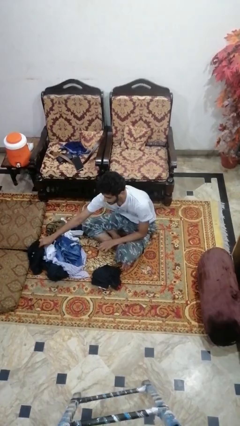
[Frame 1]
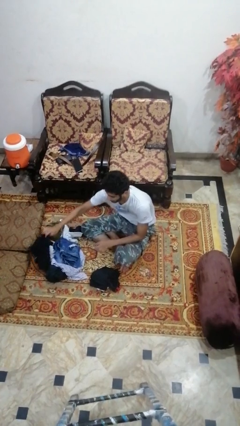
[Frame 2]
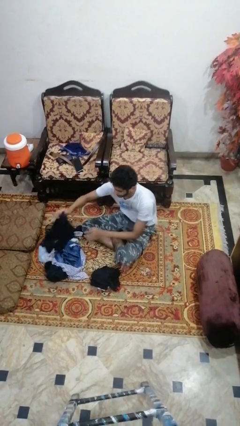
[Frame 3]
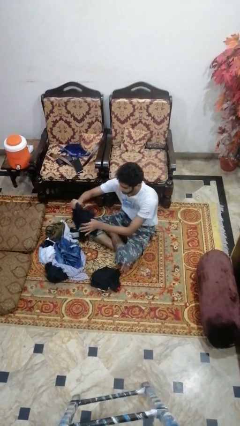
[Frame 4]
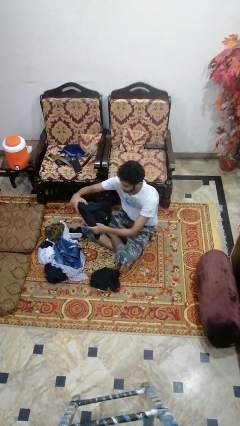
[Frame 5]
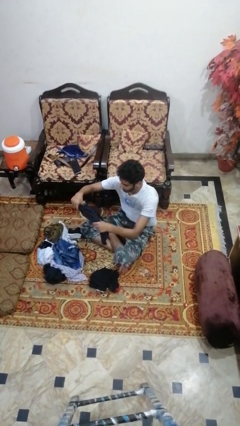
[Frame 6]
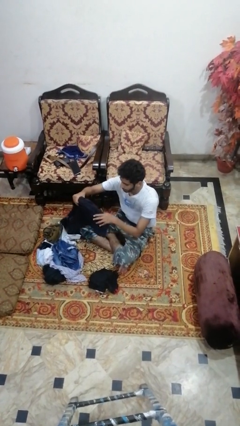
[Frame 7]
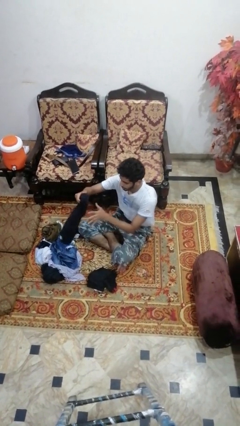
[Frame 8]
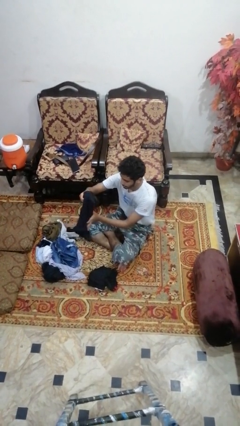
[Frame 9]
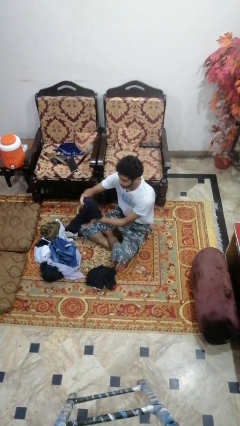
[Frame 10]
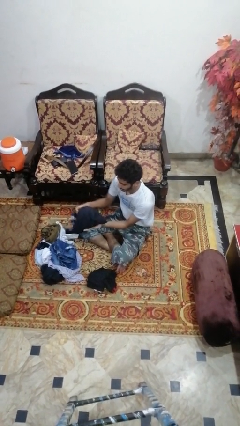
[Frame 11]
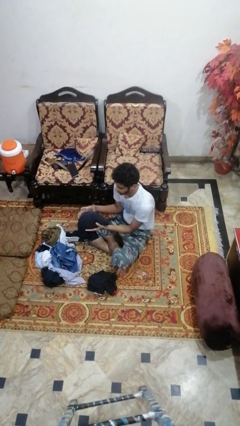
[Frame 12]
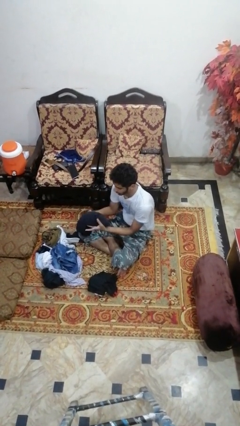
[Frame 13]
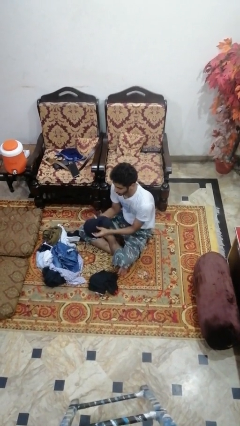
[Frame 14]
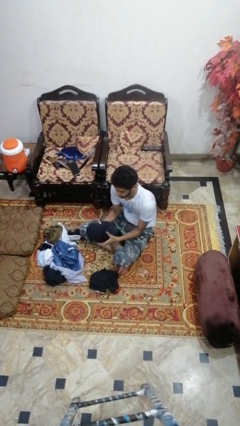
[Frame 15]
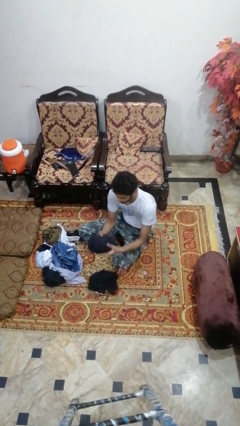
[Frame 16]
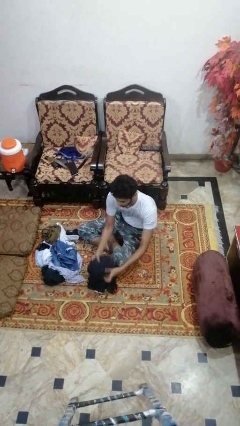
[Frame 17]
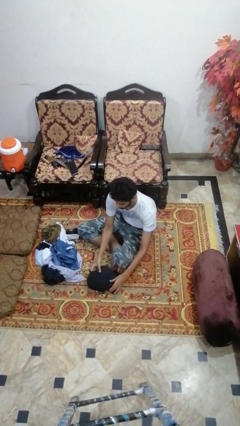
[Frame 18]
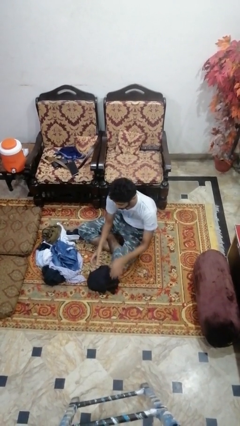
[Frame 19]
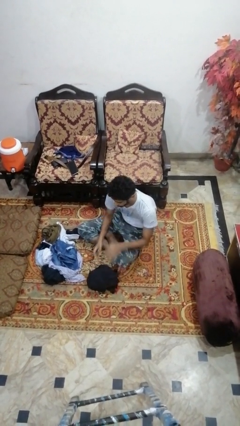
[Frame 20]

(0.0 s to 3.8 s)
person folds shirt

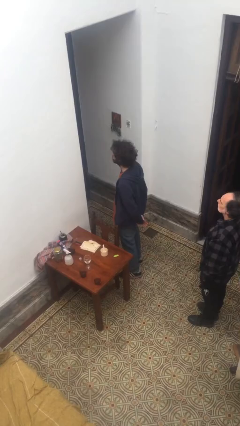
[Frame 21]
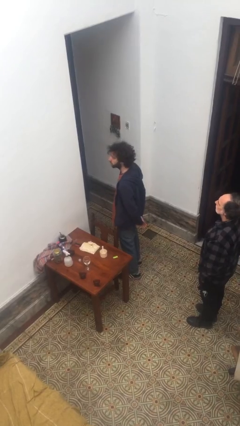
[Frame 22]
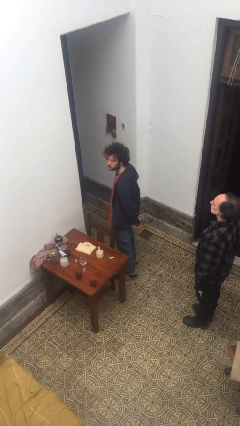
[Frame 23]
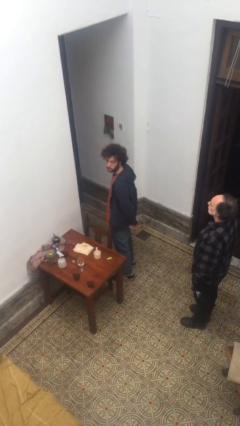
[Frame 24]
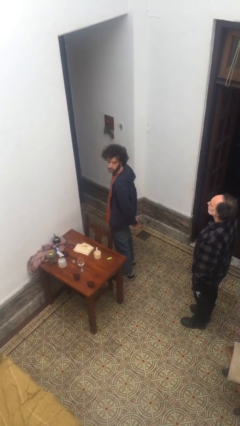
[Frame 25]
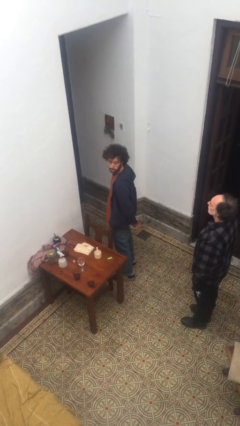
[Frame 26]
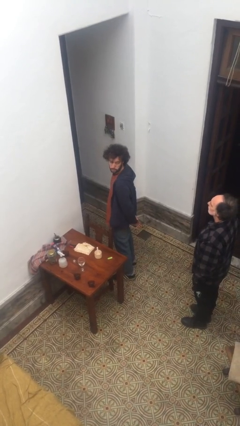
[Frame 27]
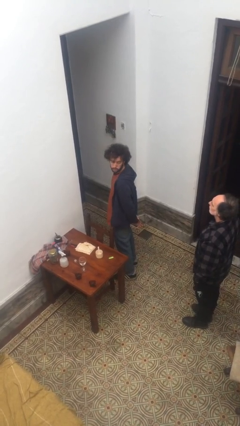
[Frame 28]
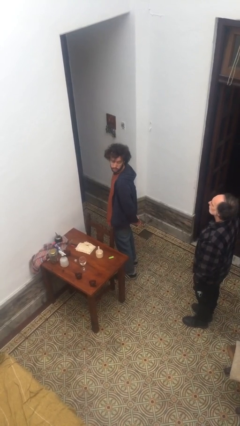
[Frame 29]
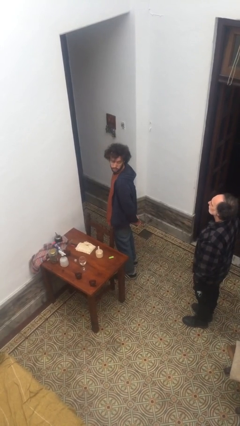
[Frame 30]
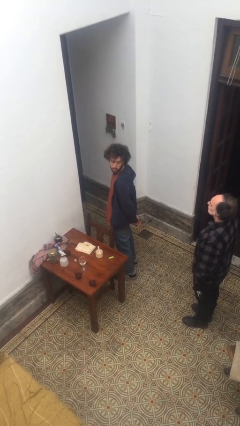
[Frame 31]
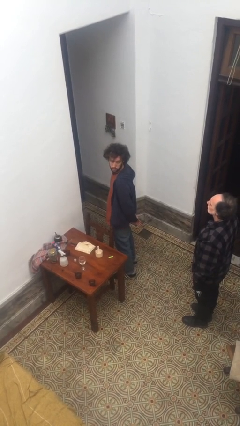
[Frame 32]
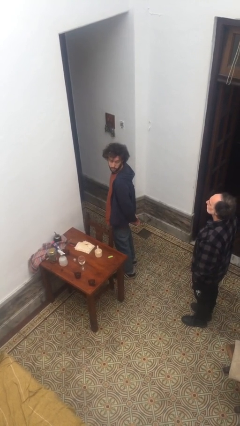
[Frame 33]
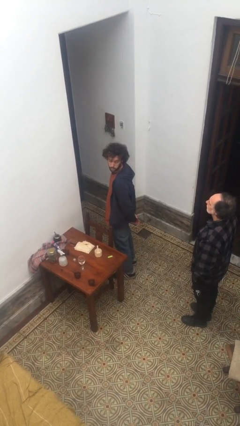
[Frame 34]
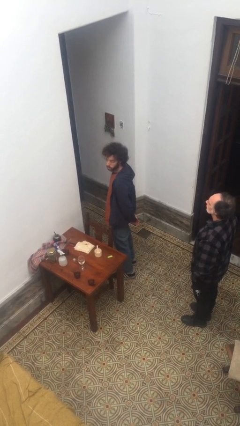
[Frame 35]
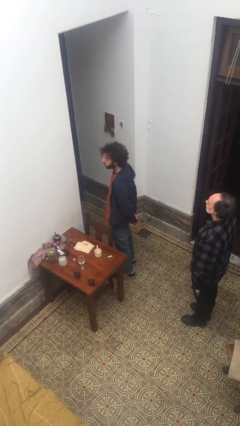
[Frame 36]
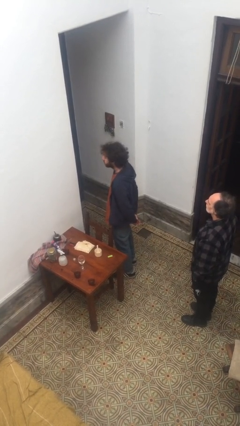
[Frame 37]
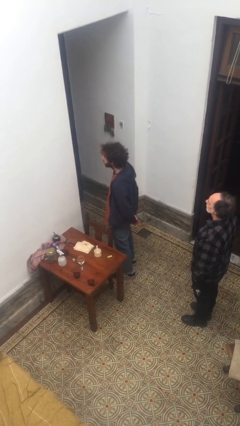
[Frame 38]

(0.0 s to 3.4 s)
person looks over shoulder

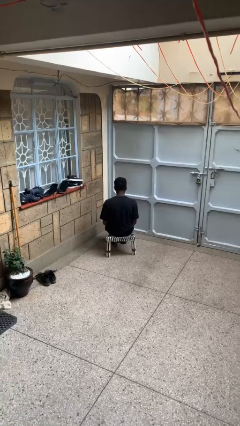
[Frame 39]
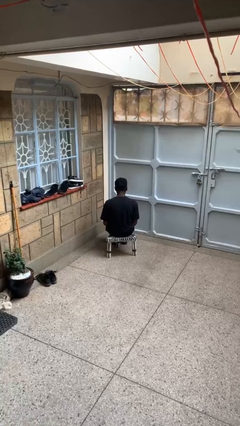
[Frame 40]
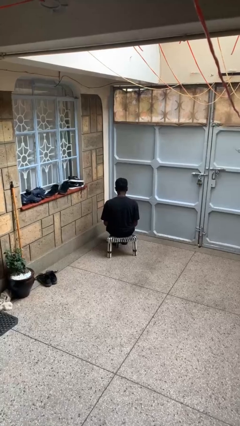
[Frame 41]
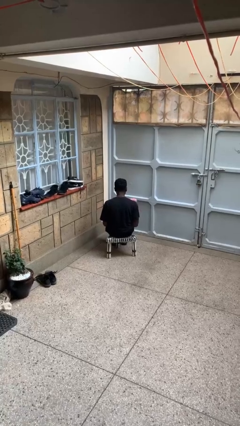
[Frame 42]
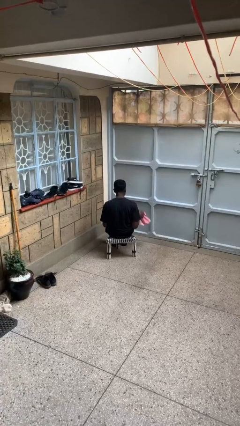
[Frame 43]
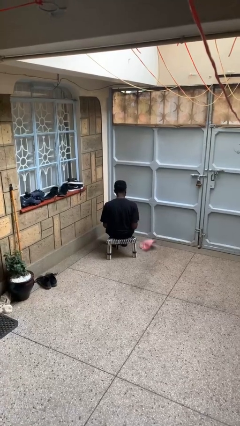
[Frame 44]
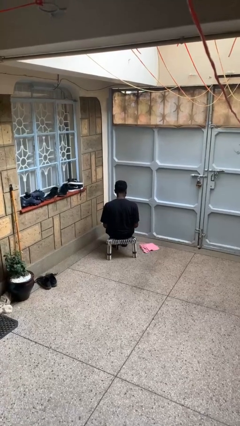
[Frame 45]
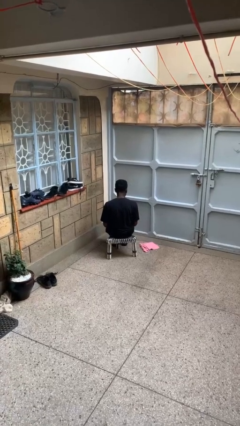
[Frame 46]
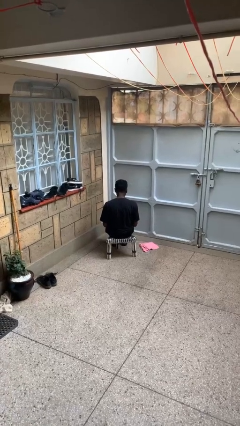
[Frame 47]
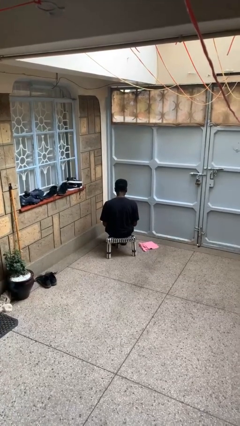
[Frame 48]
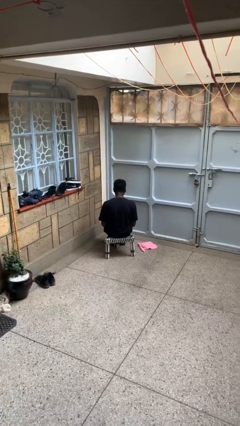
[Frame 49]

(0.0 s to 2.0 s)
person throws object to ground

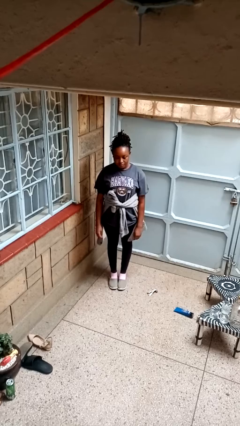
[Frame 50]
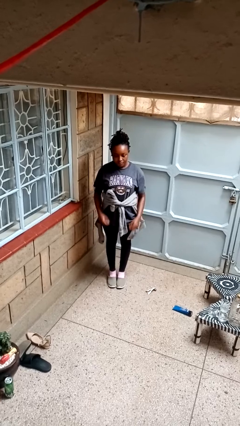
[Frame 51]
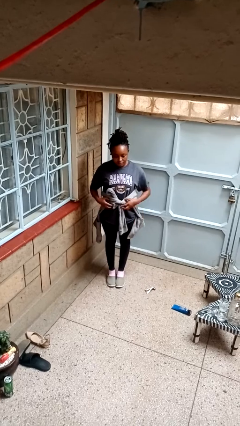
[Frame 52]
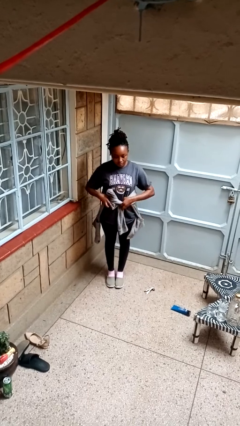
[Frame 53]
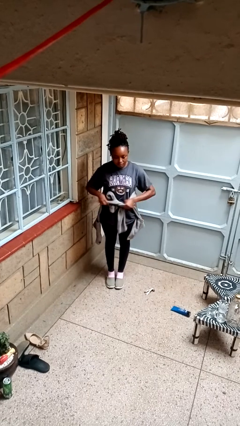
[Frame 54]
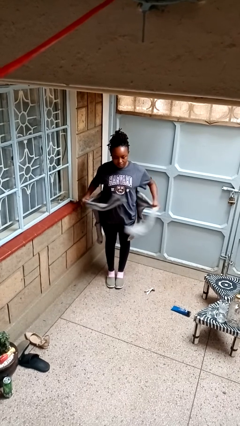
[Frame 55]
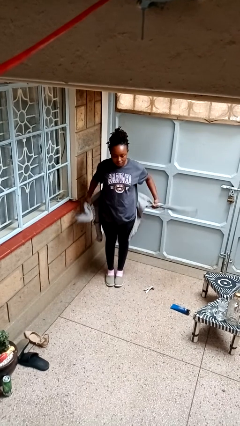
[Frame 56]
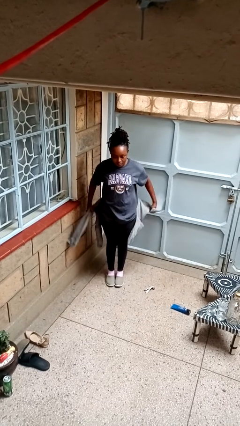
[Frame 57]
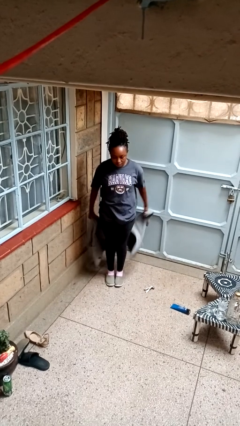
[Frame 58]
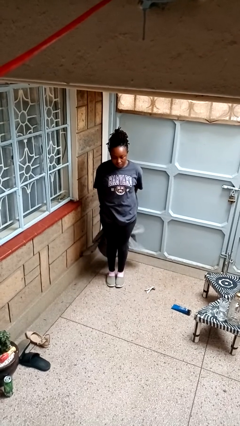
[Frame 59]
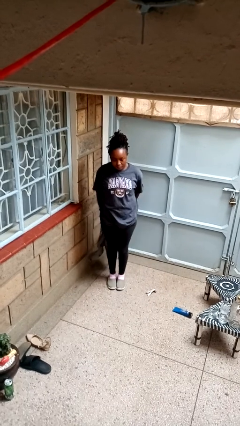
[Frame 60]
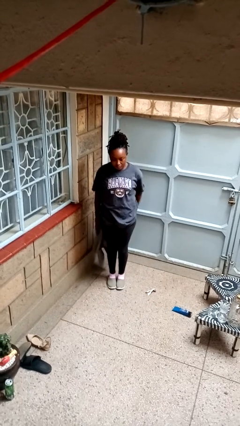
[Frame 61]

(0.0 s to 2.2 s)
person unties jacket around waist

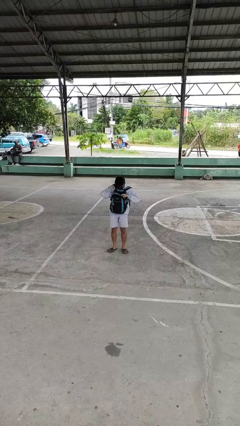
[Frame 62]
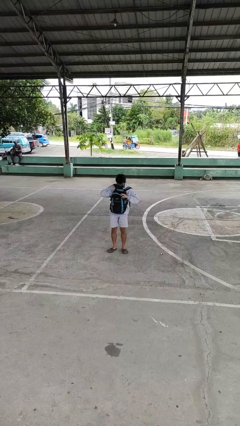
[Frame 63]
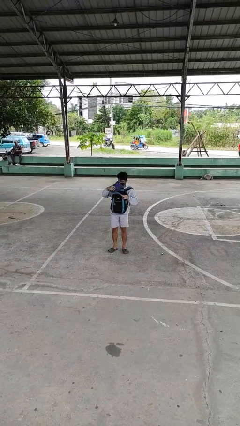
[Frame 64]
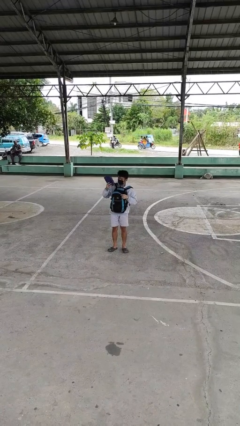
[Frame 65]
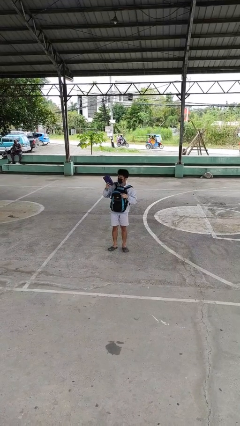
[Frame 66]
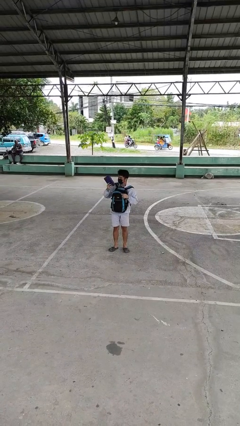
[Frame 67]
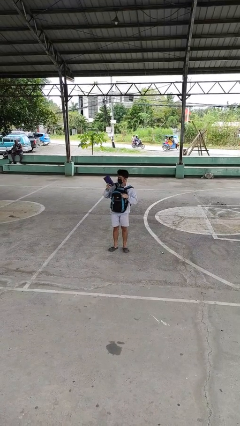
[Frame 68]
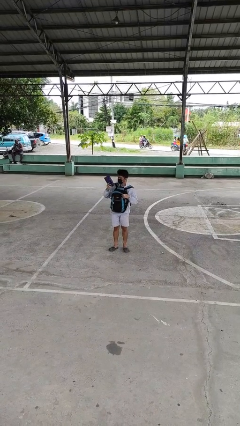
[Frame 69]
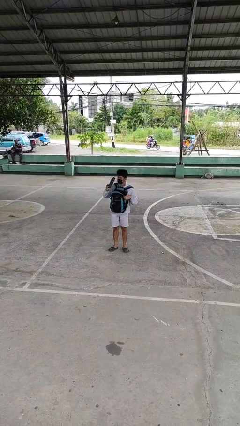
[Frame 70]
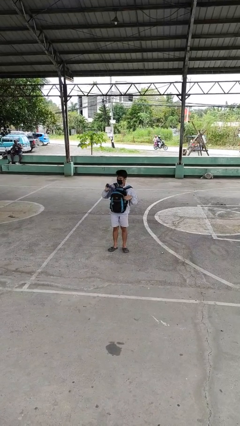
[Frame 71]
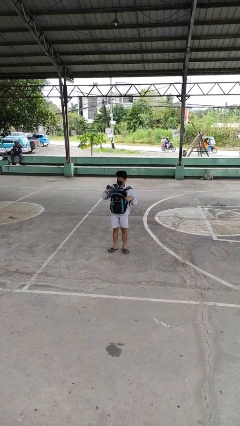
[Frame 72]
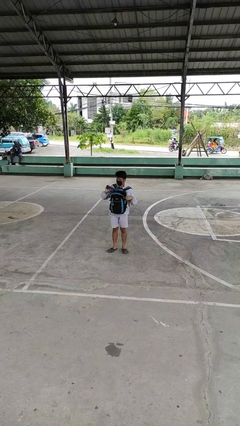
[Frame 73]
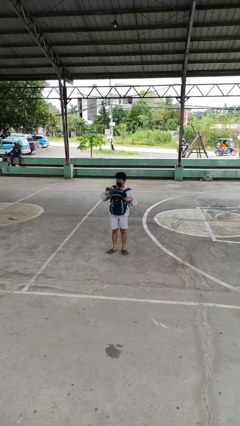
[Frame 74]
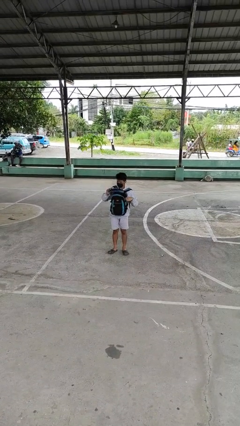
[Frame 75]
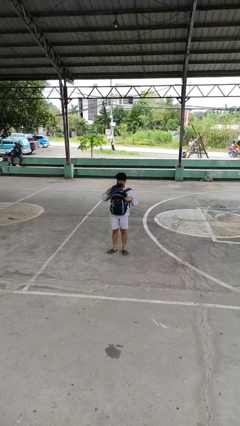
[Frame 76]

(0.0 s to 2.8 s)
person takes object from backpack

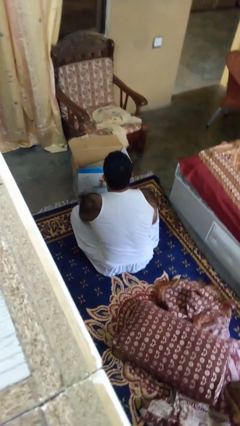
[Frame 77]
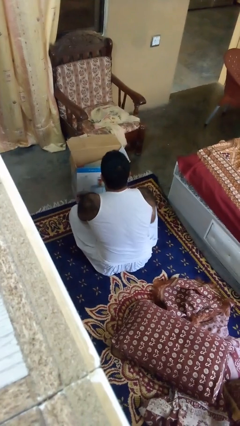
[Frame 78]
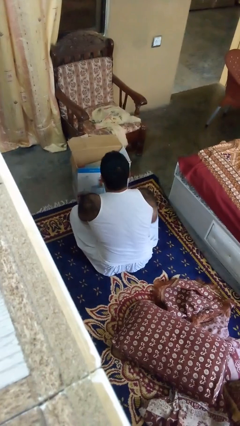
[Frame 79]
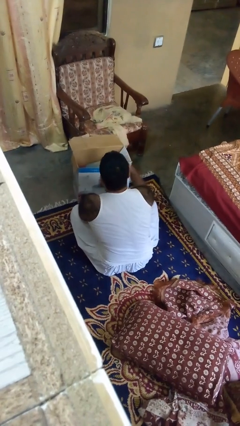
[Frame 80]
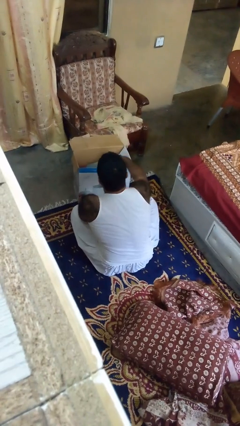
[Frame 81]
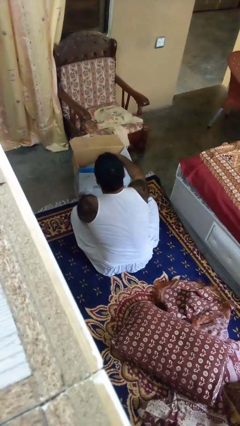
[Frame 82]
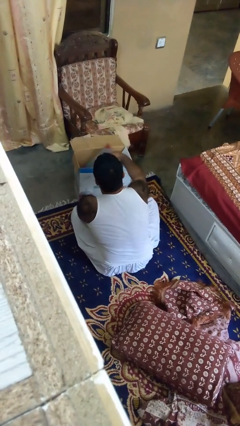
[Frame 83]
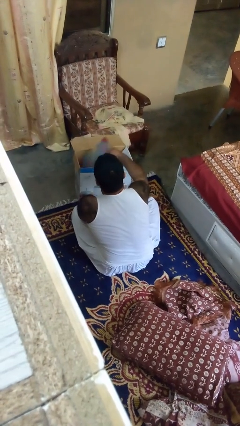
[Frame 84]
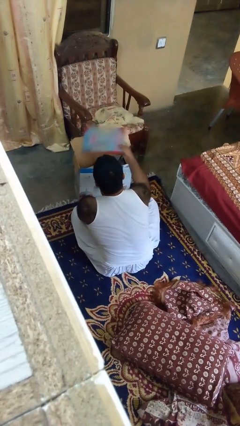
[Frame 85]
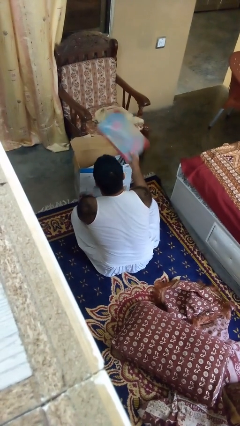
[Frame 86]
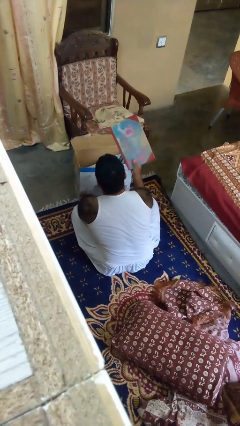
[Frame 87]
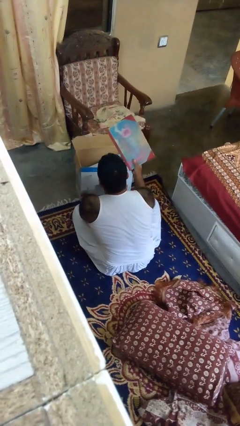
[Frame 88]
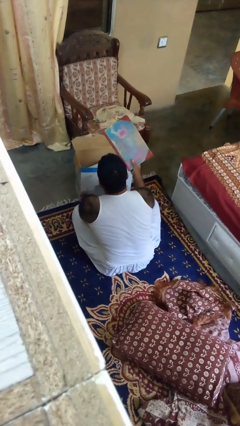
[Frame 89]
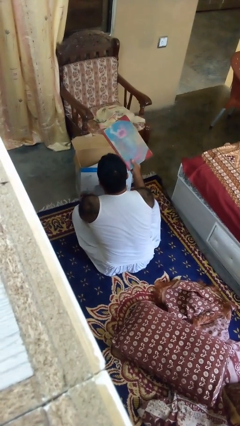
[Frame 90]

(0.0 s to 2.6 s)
person takes object from box

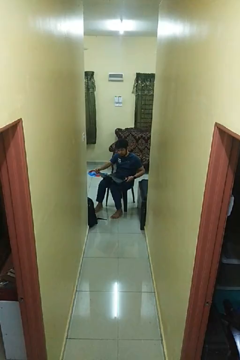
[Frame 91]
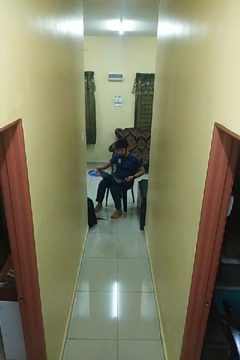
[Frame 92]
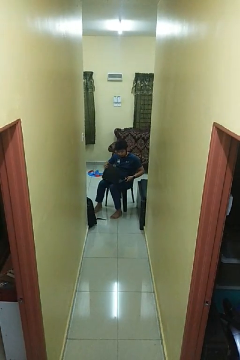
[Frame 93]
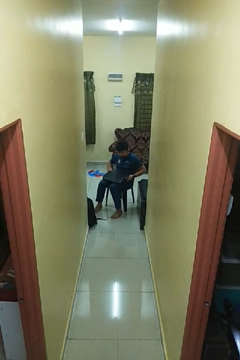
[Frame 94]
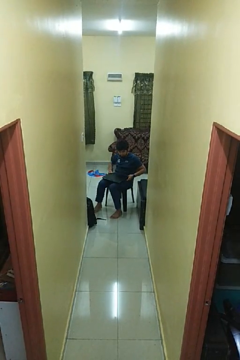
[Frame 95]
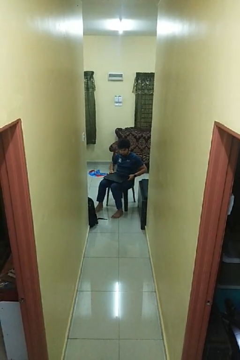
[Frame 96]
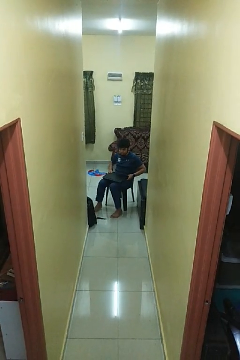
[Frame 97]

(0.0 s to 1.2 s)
person closes laptop
